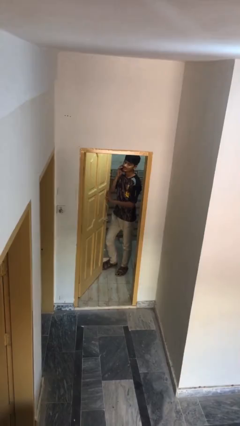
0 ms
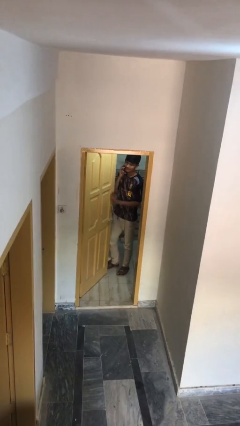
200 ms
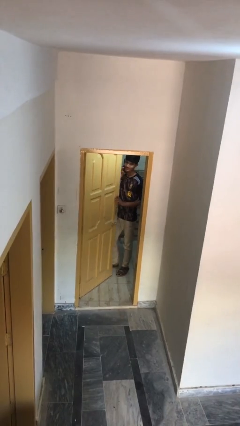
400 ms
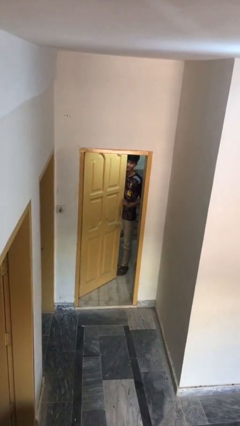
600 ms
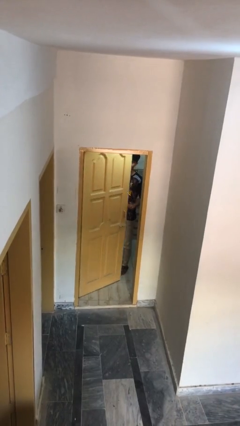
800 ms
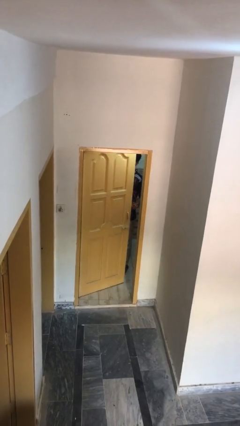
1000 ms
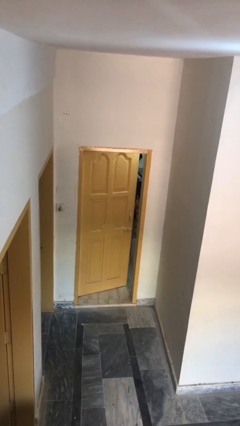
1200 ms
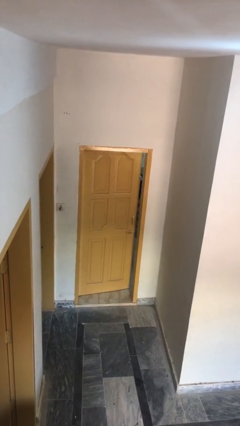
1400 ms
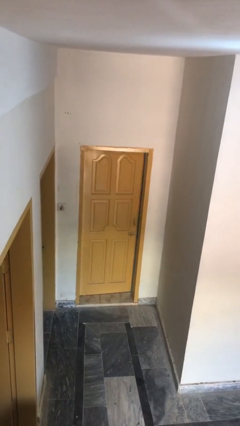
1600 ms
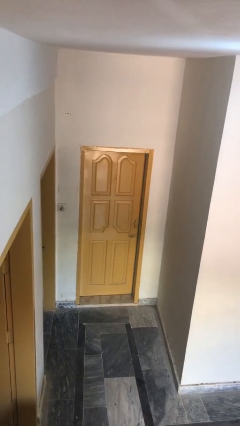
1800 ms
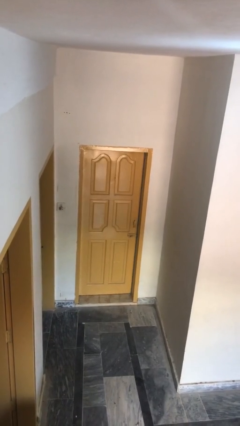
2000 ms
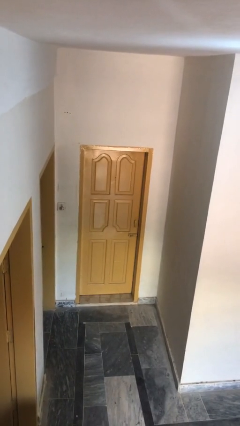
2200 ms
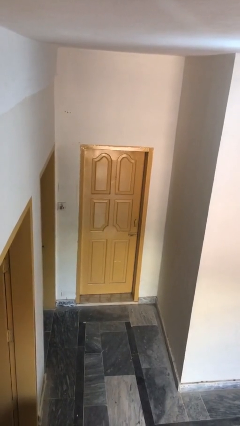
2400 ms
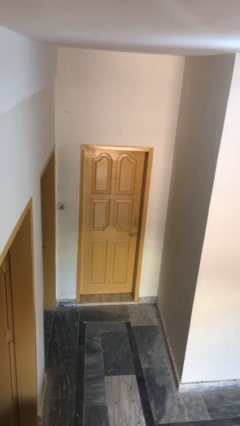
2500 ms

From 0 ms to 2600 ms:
person closes facility door

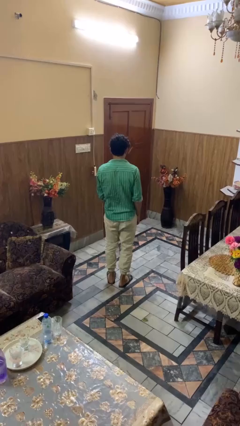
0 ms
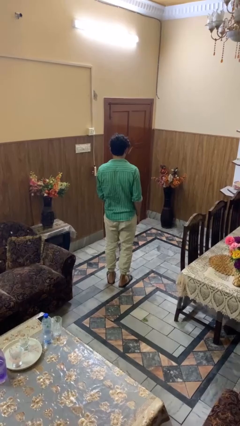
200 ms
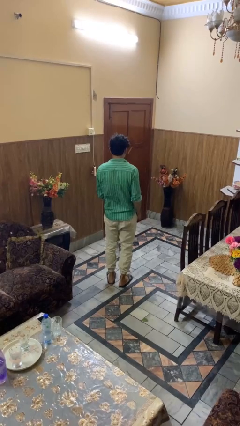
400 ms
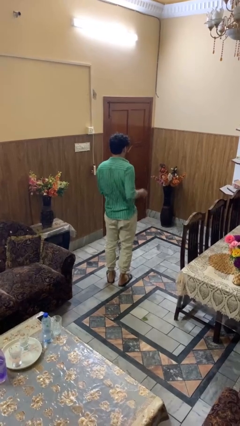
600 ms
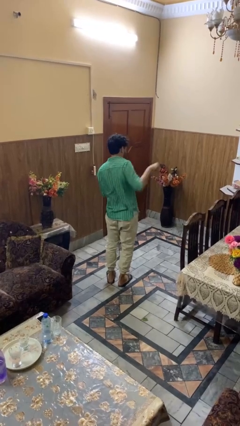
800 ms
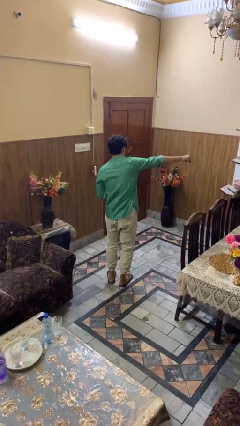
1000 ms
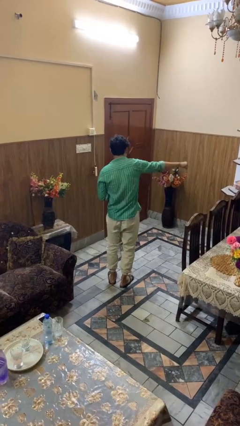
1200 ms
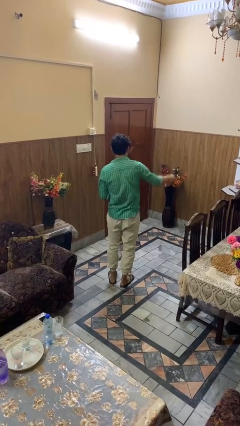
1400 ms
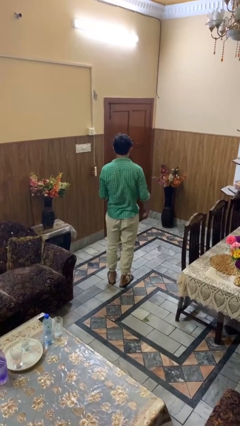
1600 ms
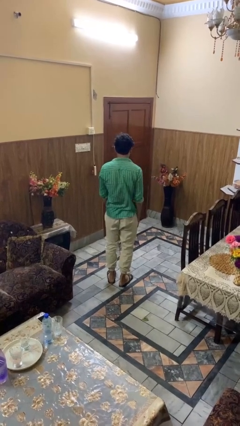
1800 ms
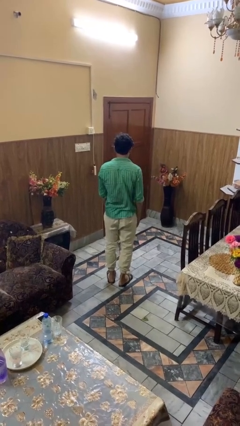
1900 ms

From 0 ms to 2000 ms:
person karate chop

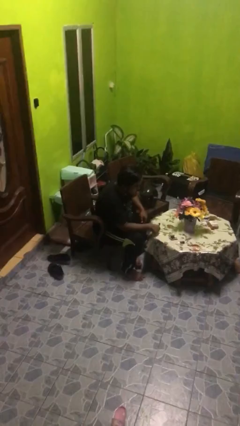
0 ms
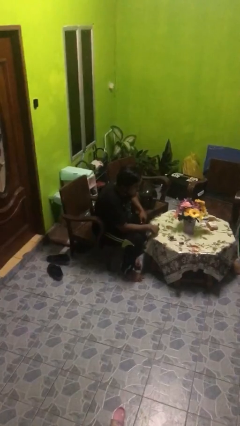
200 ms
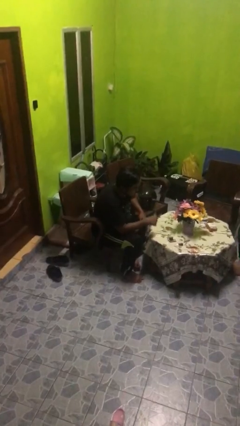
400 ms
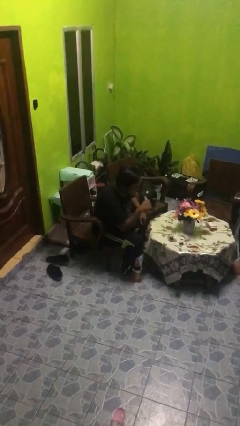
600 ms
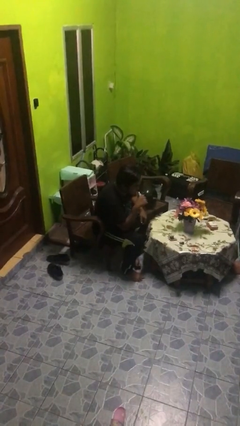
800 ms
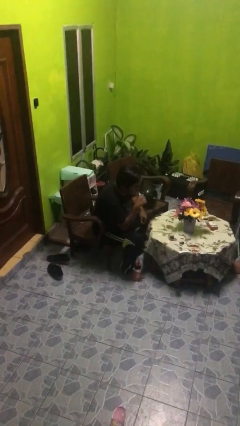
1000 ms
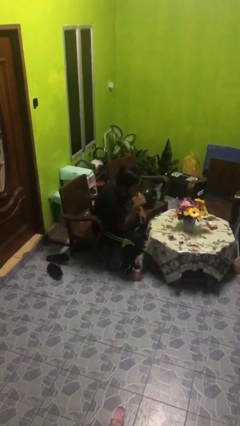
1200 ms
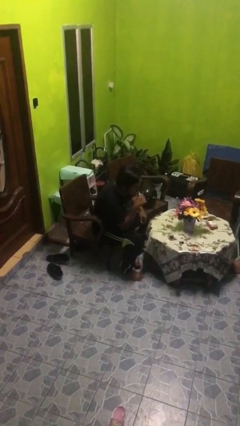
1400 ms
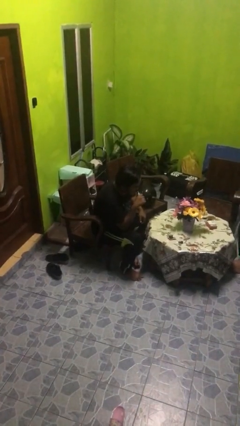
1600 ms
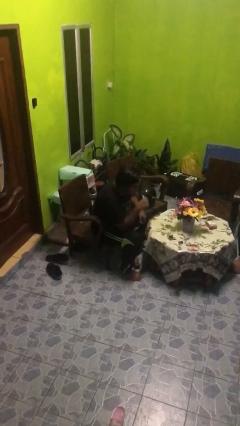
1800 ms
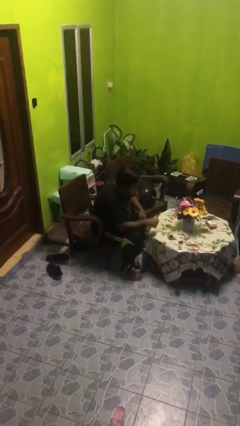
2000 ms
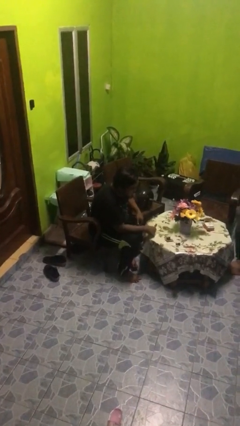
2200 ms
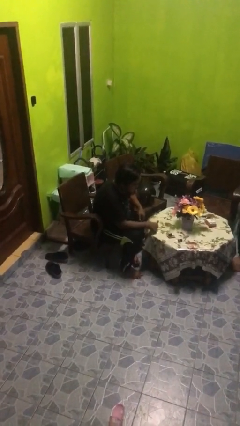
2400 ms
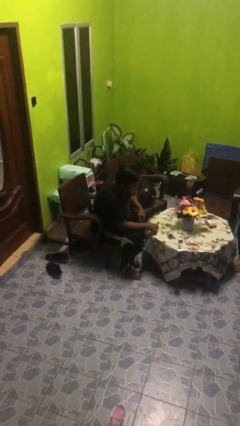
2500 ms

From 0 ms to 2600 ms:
person vapes

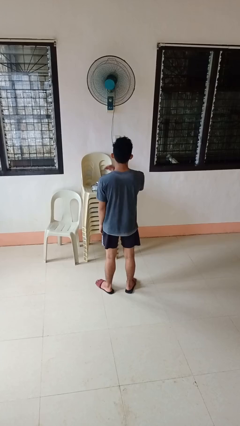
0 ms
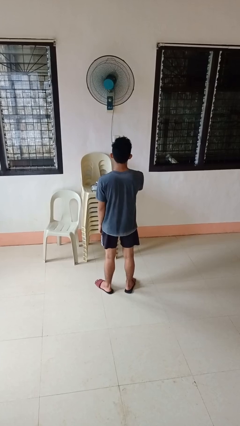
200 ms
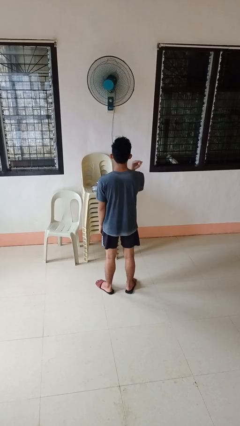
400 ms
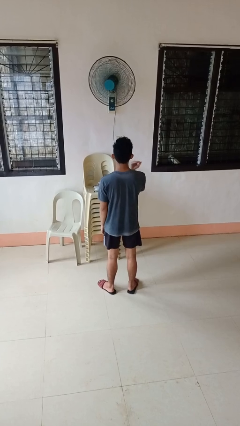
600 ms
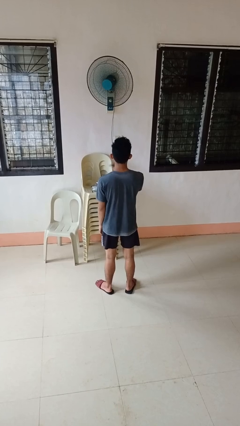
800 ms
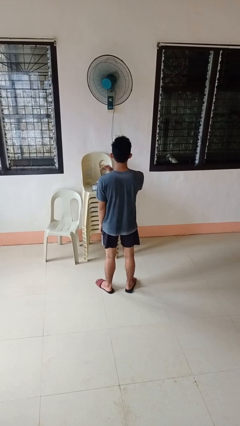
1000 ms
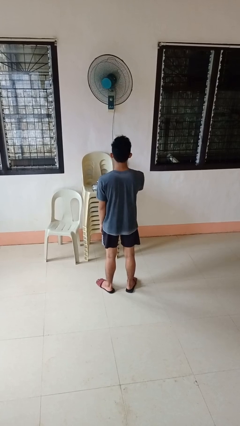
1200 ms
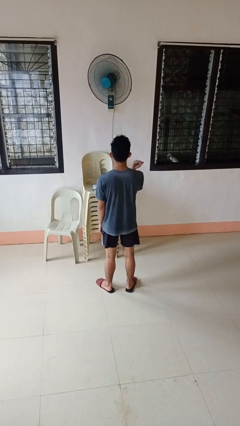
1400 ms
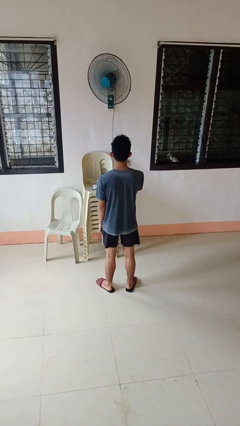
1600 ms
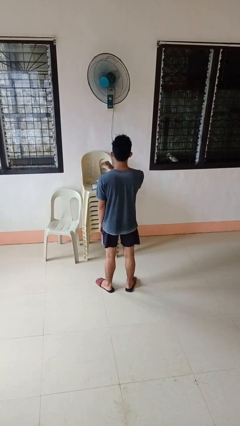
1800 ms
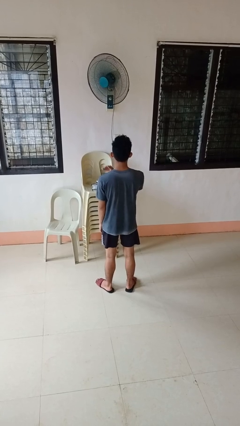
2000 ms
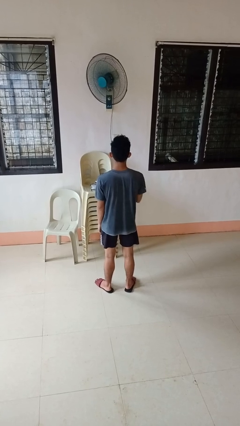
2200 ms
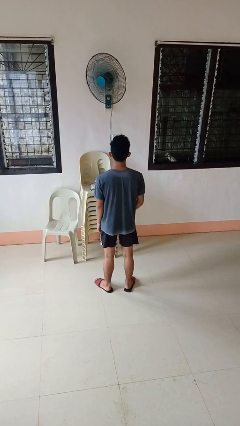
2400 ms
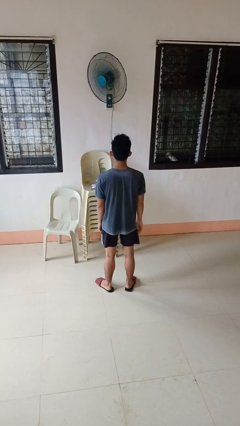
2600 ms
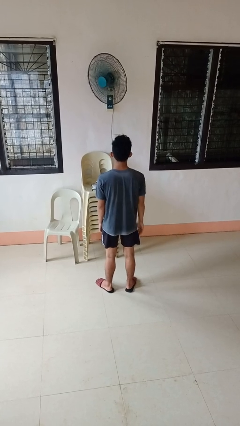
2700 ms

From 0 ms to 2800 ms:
person gestures cut

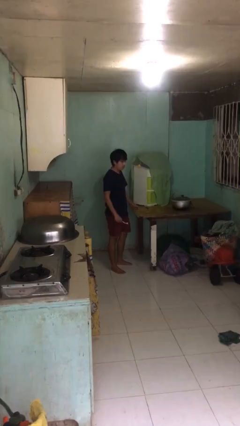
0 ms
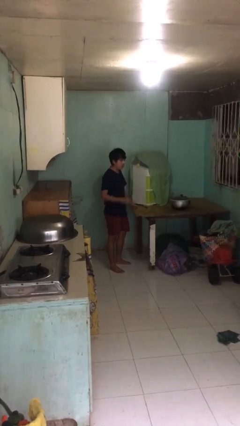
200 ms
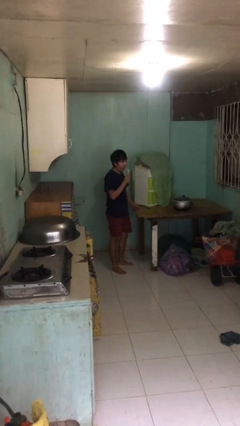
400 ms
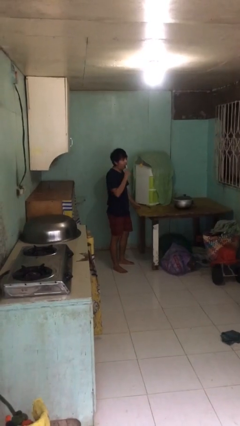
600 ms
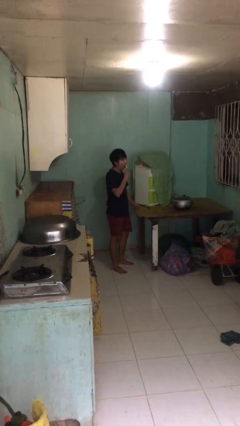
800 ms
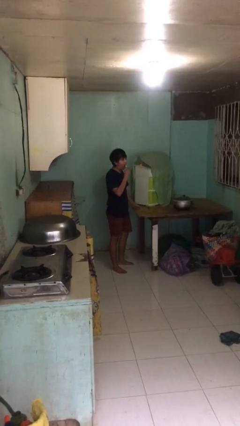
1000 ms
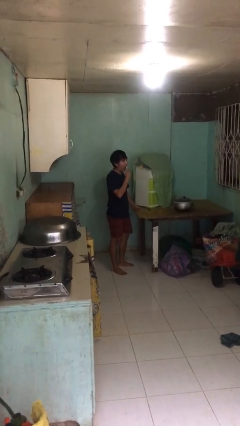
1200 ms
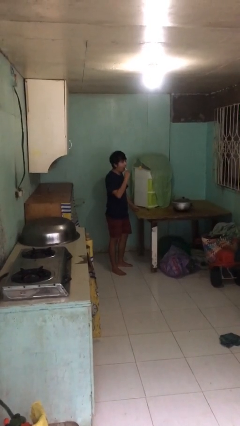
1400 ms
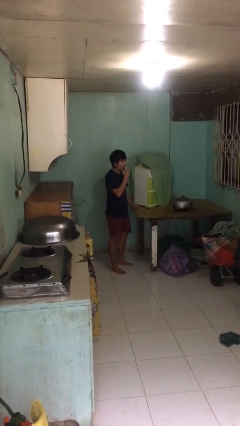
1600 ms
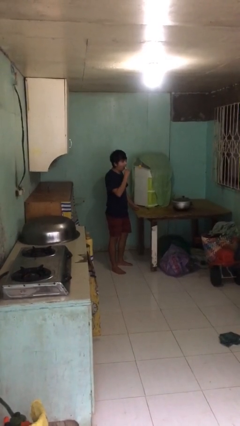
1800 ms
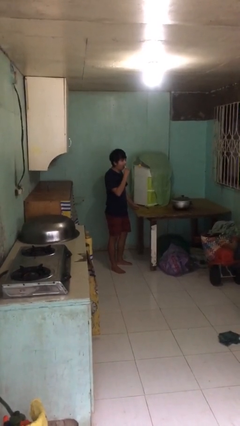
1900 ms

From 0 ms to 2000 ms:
person brushes teeth

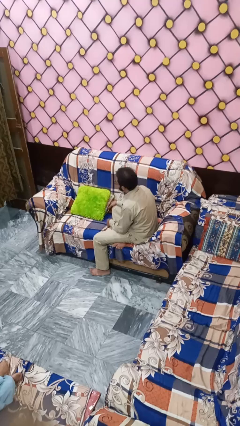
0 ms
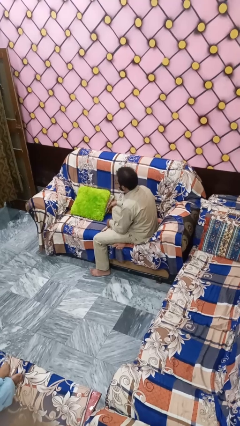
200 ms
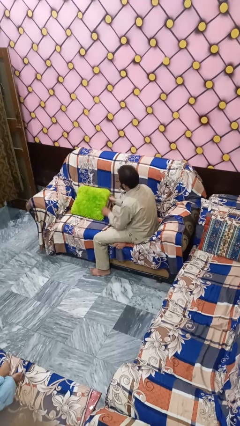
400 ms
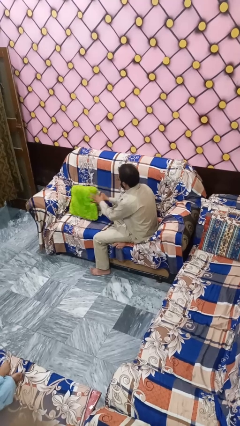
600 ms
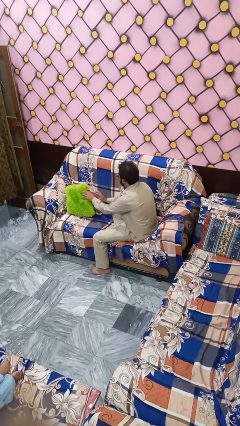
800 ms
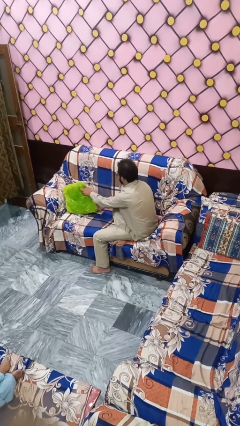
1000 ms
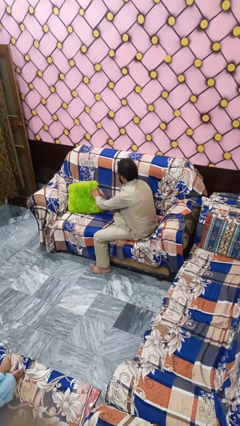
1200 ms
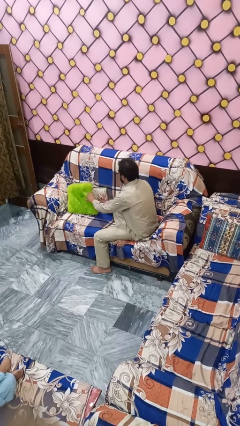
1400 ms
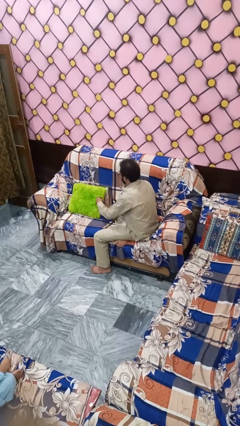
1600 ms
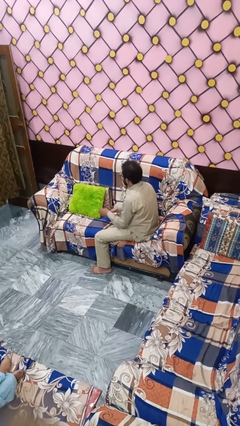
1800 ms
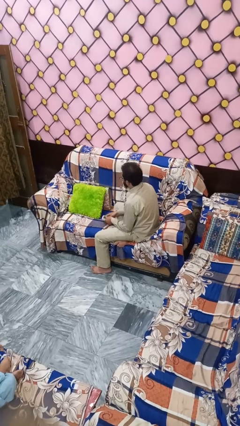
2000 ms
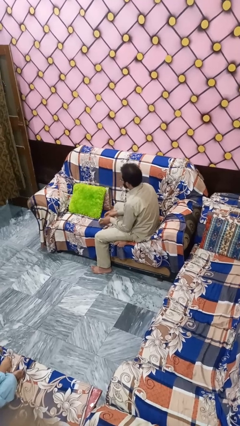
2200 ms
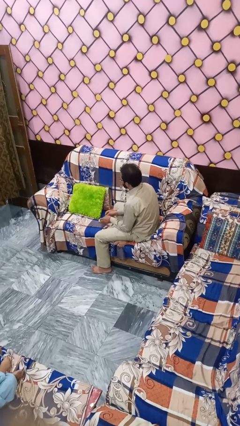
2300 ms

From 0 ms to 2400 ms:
person searches in couch

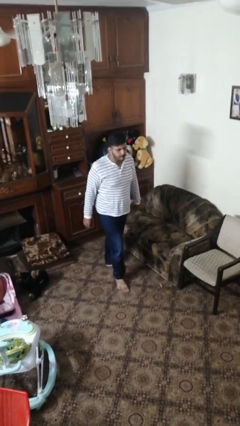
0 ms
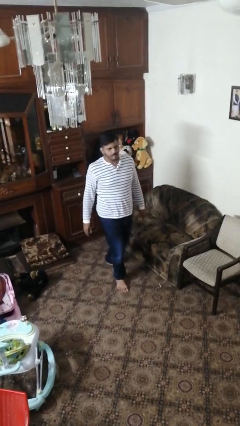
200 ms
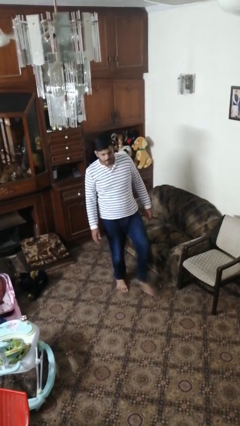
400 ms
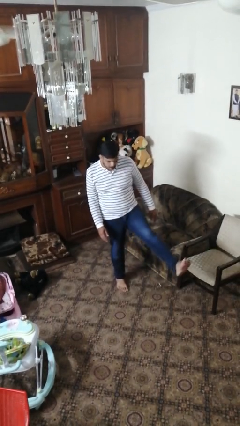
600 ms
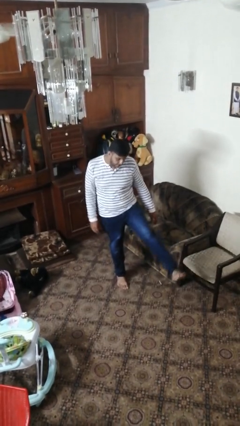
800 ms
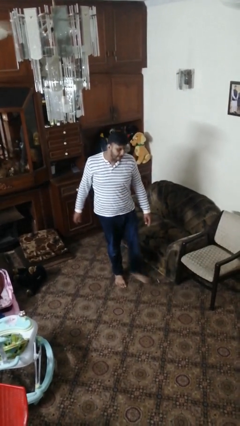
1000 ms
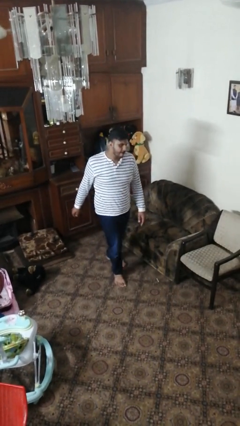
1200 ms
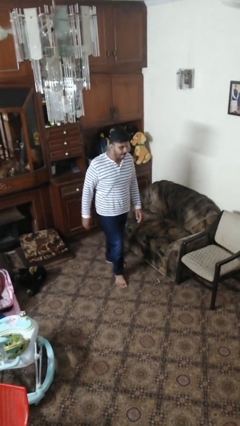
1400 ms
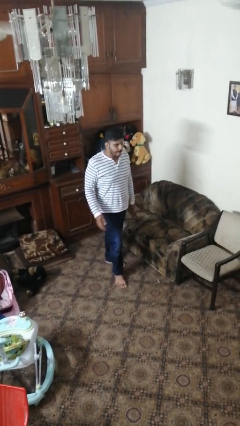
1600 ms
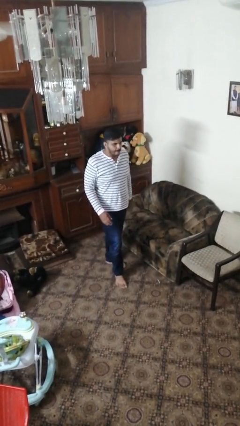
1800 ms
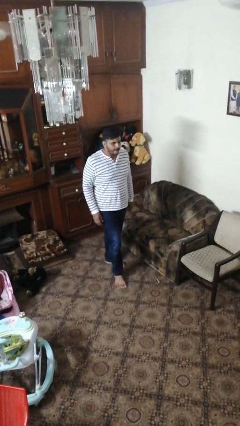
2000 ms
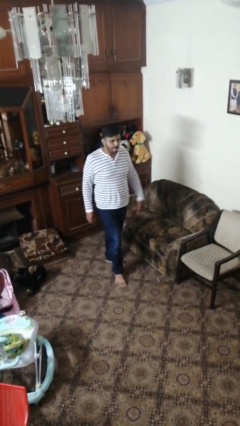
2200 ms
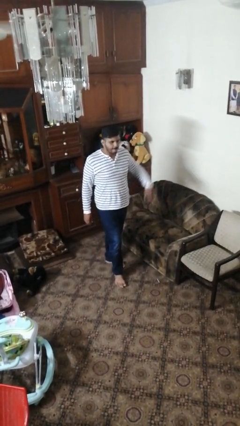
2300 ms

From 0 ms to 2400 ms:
person karate kicks
